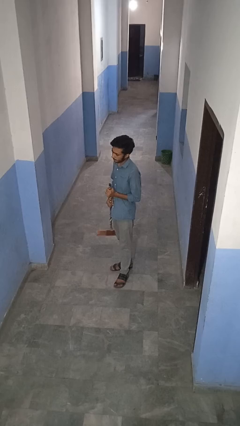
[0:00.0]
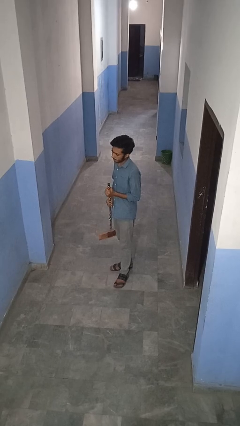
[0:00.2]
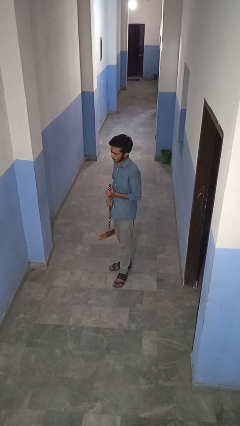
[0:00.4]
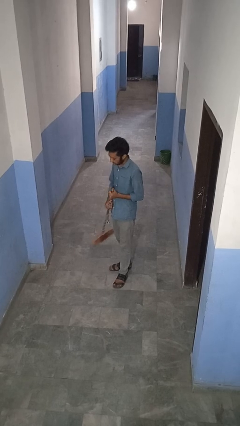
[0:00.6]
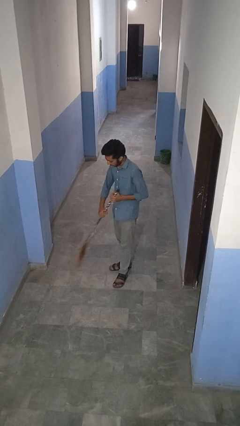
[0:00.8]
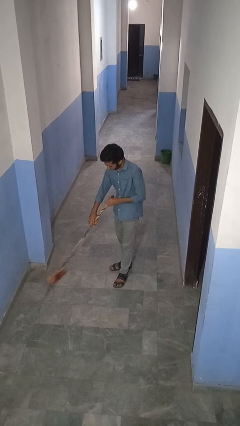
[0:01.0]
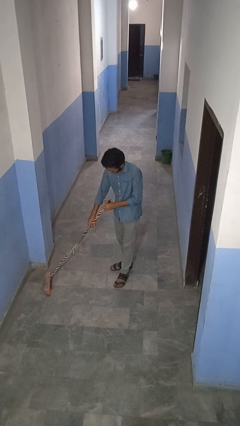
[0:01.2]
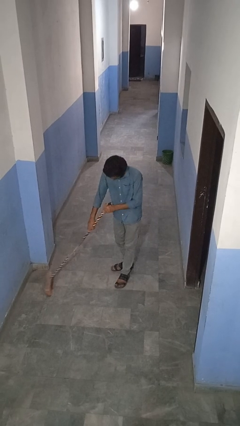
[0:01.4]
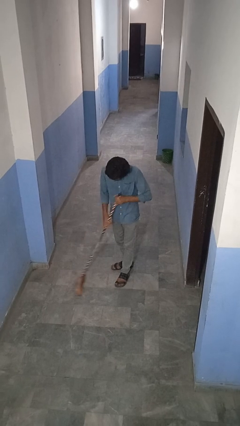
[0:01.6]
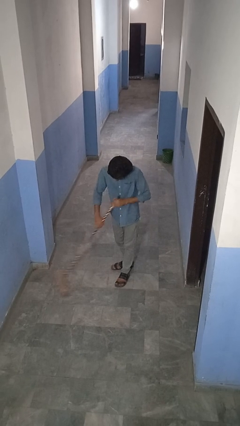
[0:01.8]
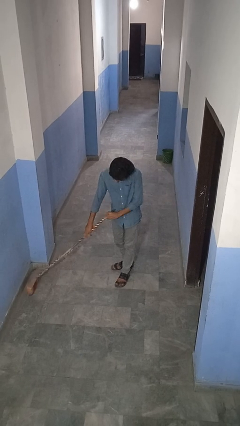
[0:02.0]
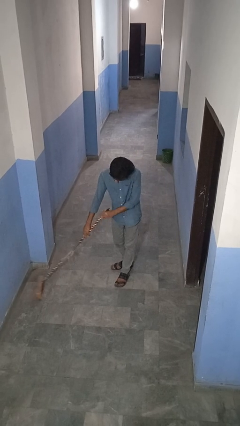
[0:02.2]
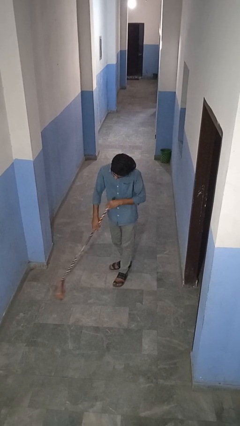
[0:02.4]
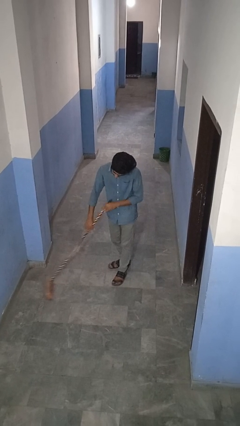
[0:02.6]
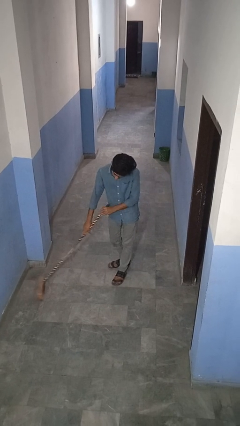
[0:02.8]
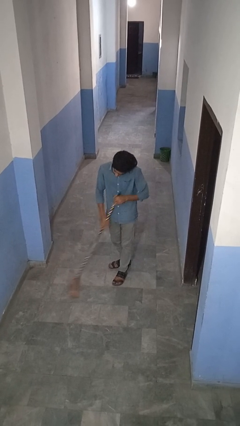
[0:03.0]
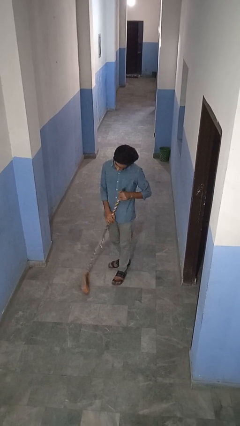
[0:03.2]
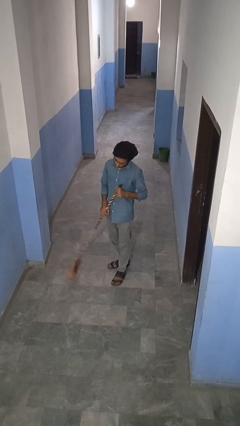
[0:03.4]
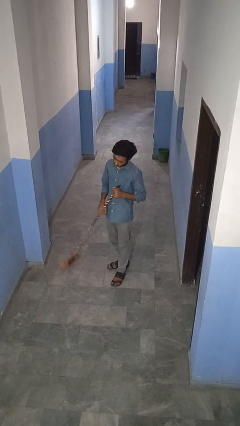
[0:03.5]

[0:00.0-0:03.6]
person sweeps floor

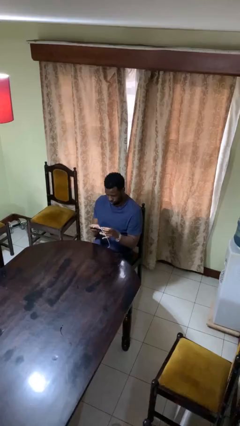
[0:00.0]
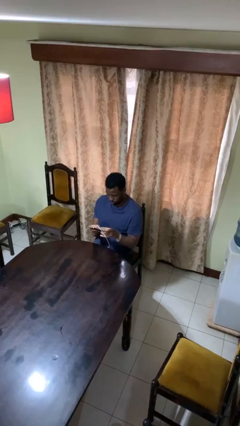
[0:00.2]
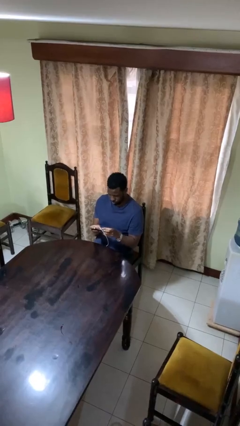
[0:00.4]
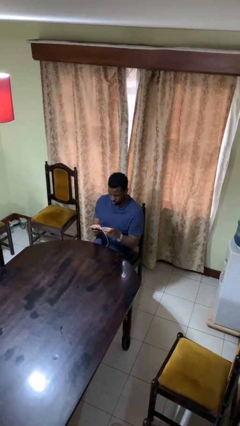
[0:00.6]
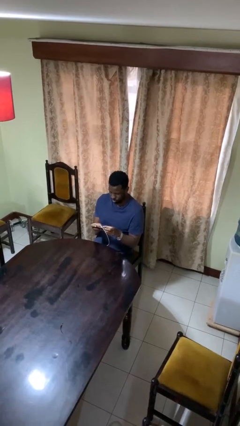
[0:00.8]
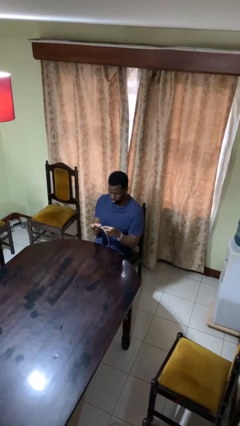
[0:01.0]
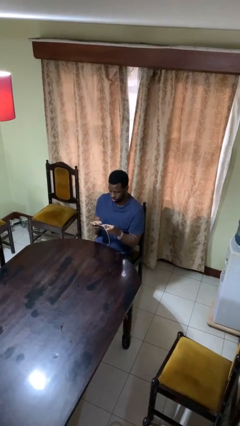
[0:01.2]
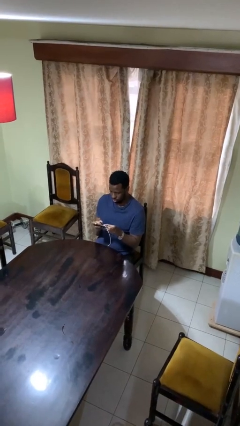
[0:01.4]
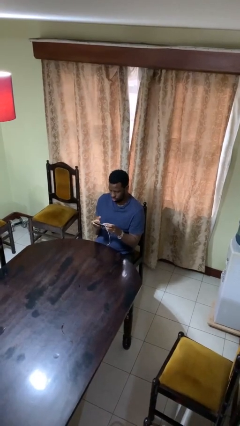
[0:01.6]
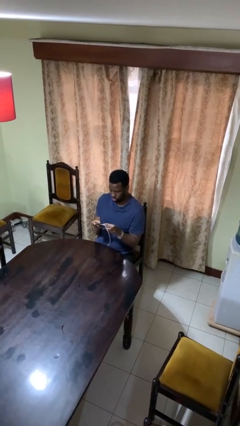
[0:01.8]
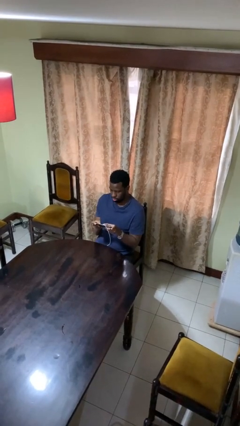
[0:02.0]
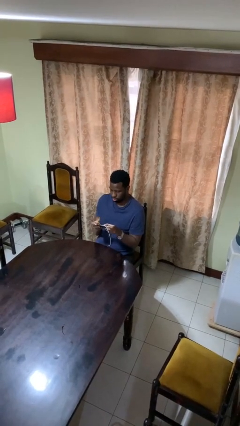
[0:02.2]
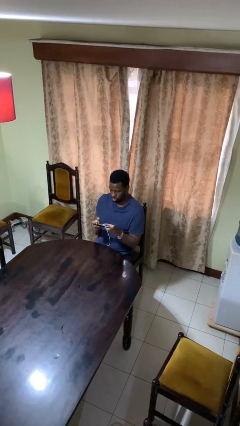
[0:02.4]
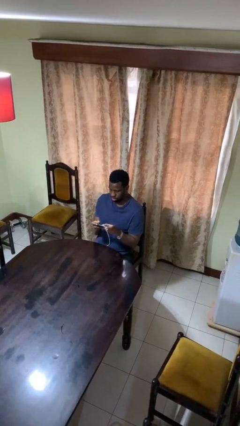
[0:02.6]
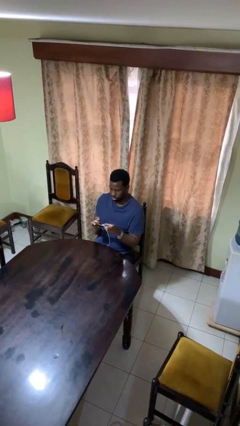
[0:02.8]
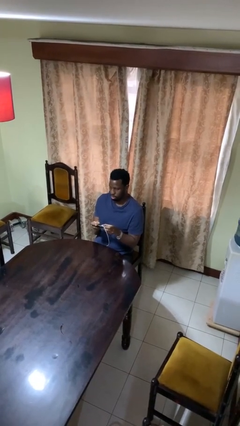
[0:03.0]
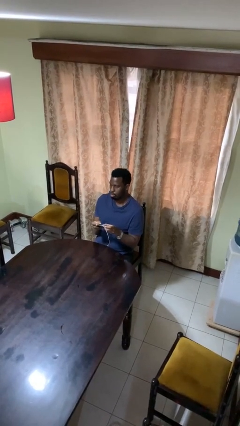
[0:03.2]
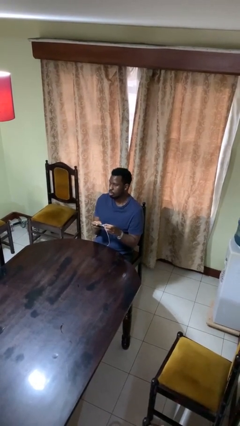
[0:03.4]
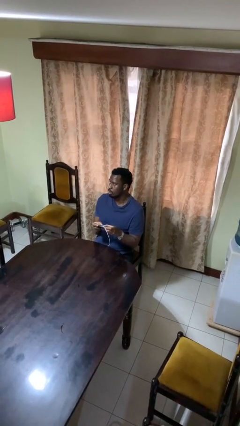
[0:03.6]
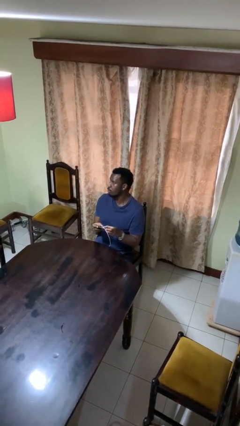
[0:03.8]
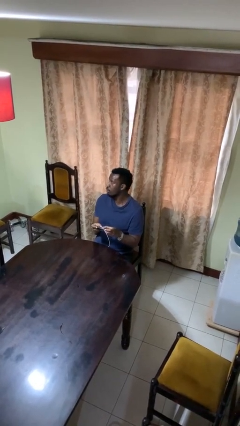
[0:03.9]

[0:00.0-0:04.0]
person interacts with handheld game

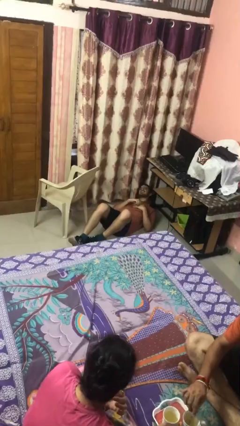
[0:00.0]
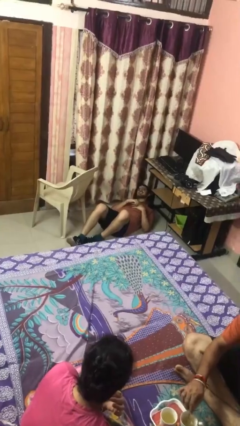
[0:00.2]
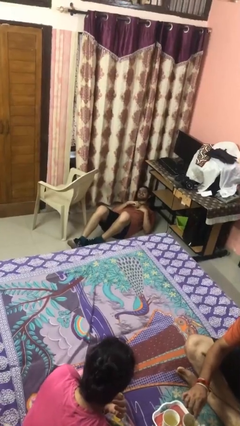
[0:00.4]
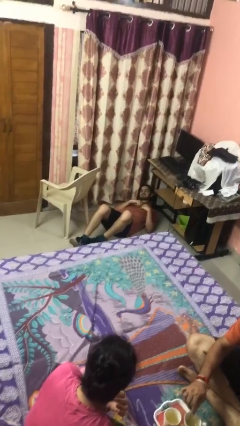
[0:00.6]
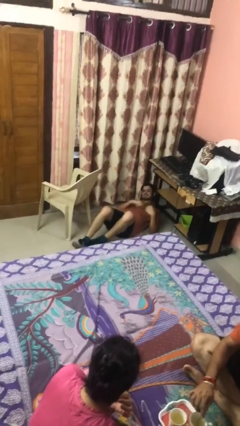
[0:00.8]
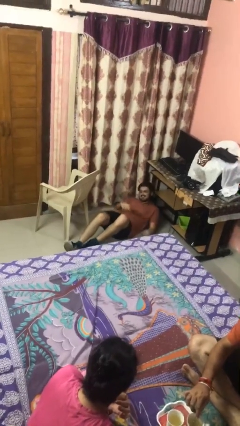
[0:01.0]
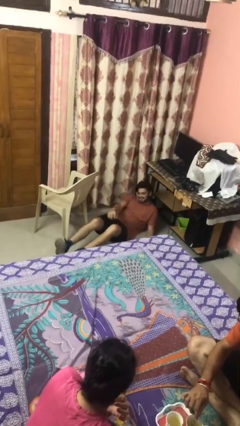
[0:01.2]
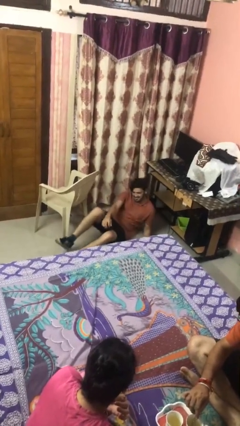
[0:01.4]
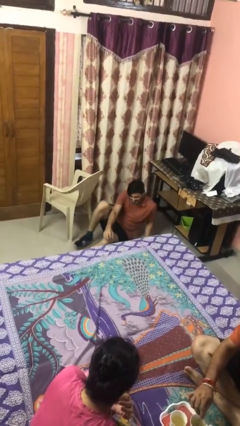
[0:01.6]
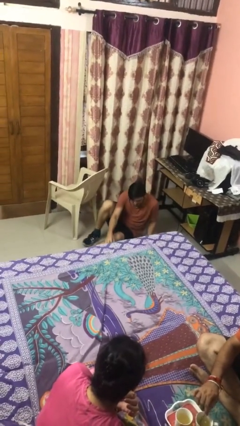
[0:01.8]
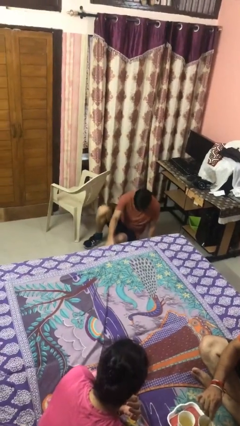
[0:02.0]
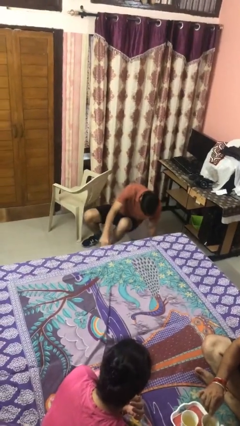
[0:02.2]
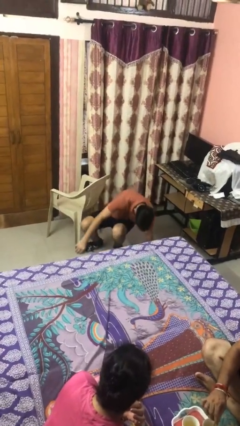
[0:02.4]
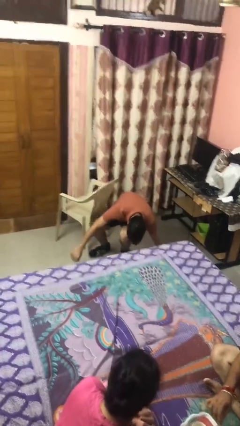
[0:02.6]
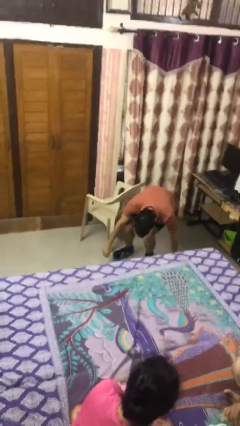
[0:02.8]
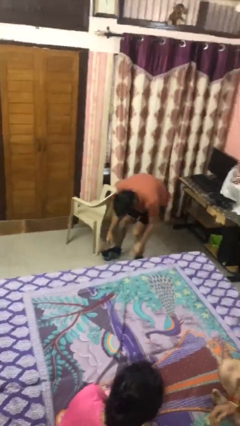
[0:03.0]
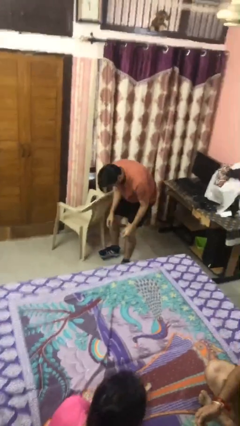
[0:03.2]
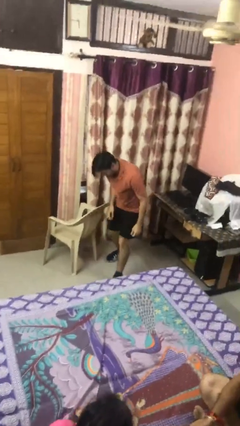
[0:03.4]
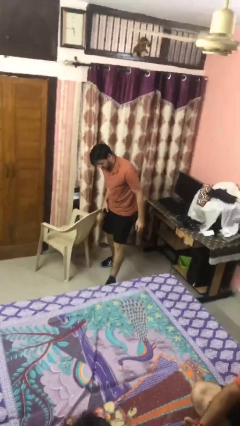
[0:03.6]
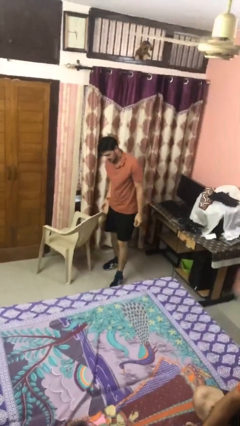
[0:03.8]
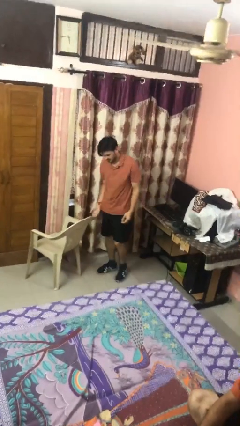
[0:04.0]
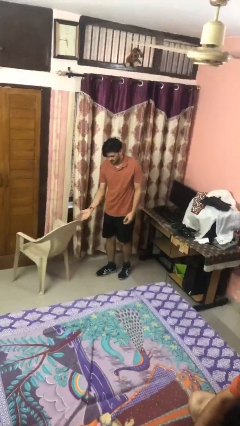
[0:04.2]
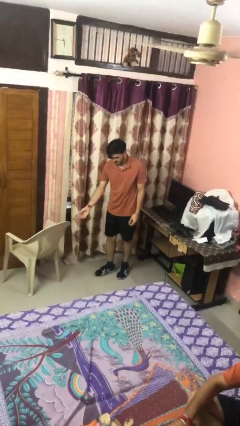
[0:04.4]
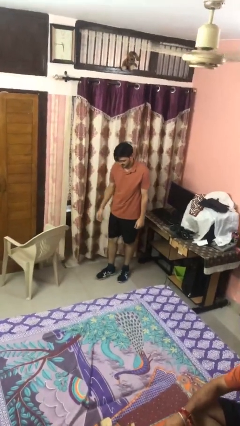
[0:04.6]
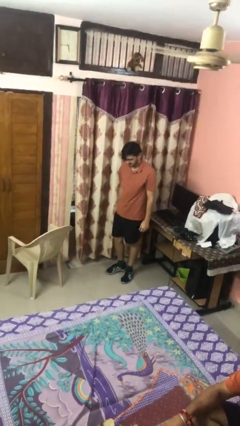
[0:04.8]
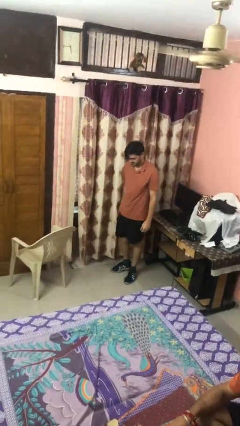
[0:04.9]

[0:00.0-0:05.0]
person stands up from floor

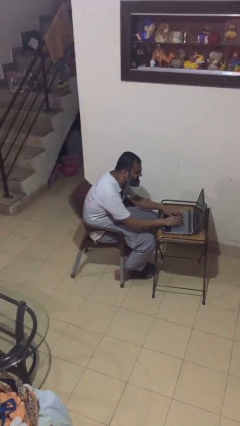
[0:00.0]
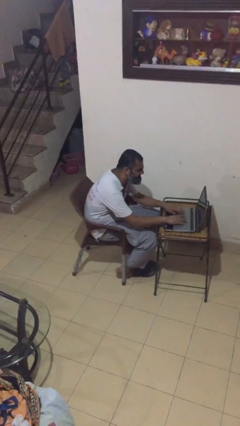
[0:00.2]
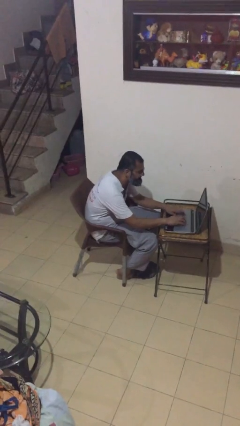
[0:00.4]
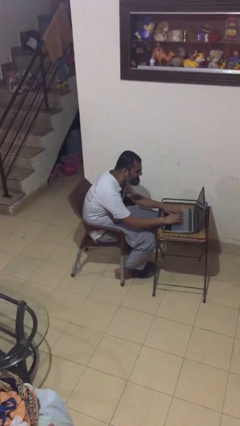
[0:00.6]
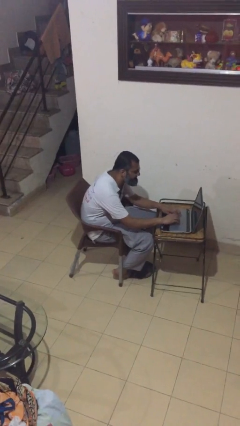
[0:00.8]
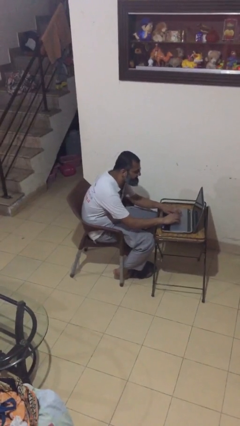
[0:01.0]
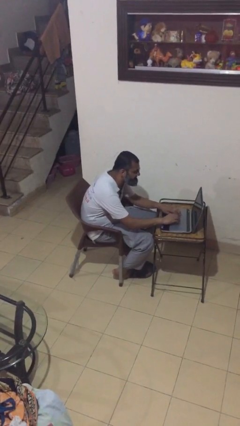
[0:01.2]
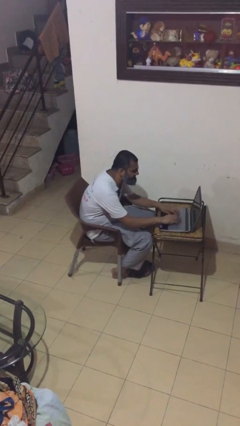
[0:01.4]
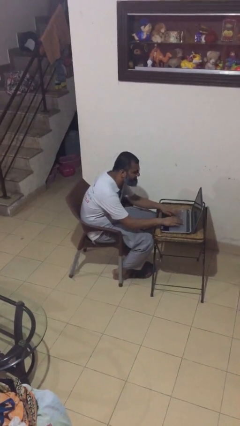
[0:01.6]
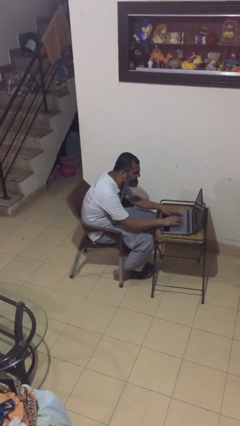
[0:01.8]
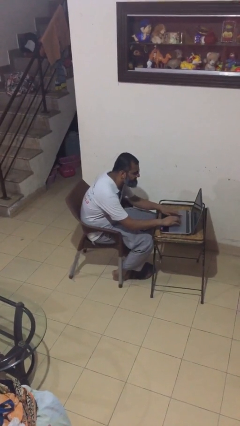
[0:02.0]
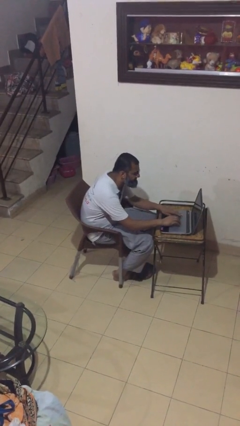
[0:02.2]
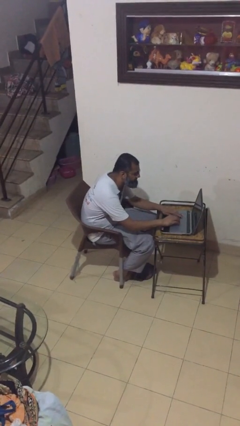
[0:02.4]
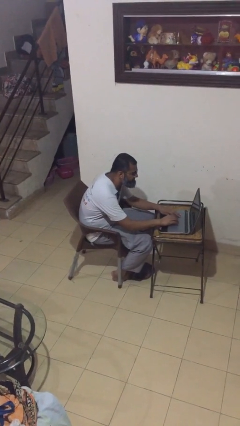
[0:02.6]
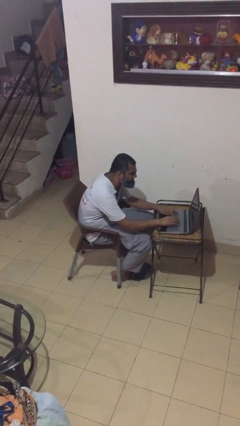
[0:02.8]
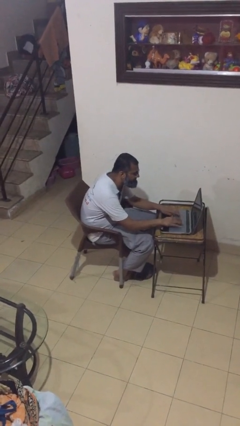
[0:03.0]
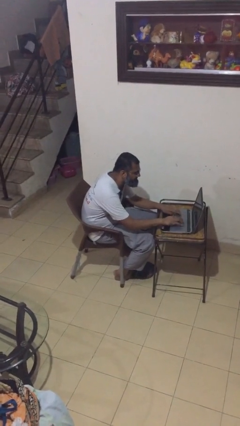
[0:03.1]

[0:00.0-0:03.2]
person interacts with laptop

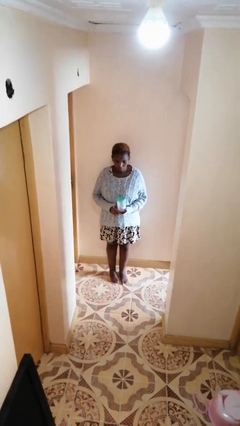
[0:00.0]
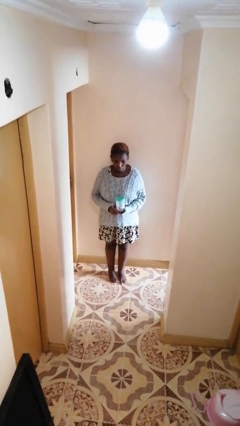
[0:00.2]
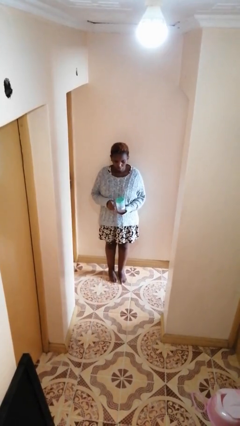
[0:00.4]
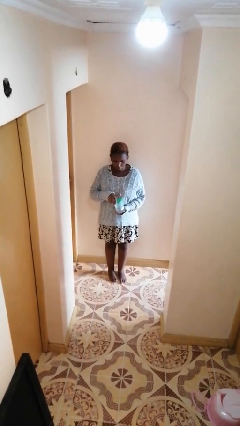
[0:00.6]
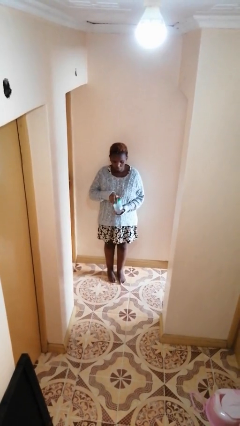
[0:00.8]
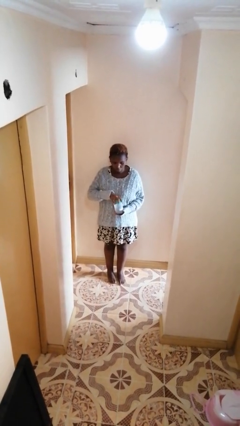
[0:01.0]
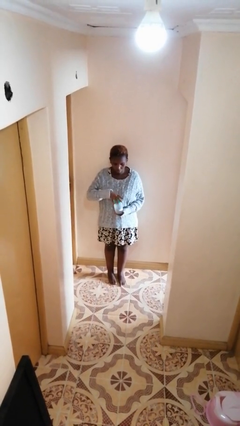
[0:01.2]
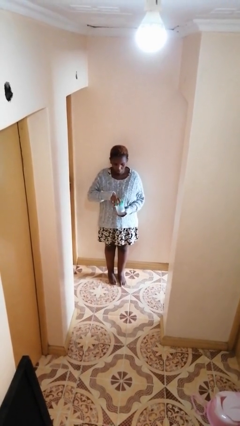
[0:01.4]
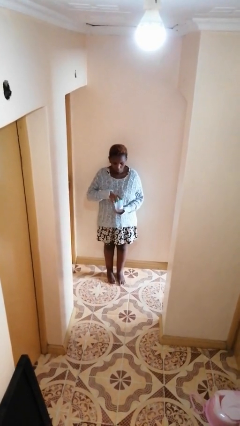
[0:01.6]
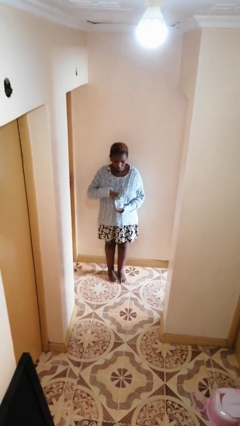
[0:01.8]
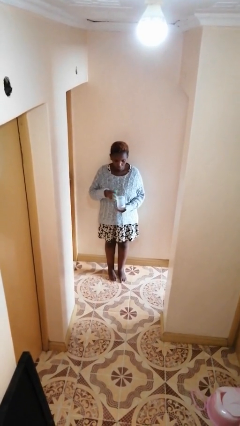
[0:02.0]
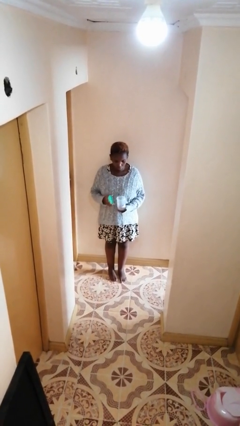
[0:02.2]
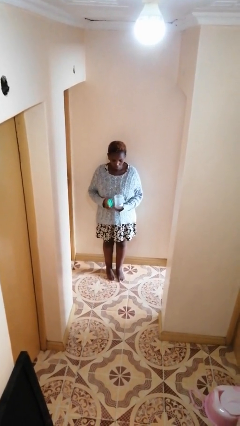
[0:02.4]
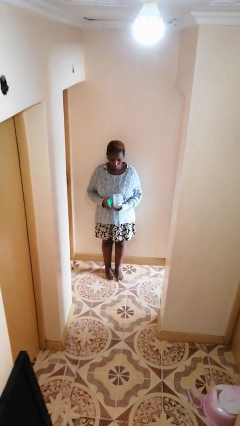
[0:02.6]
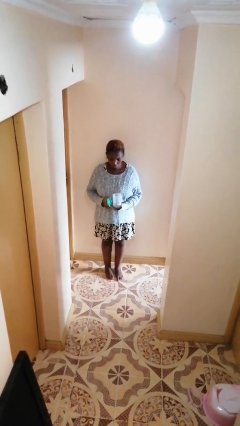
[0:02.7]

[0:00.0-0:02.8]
person opens jar
